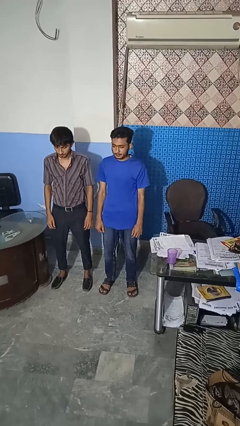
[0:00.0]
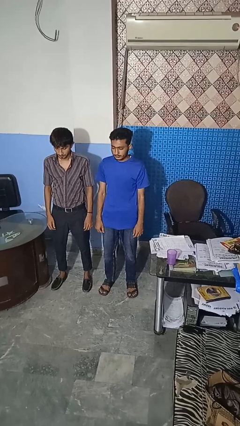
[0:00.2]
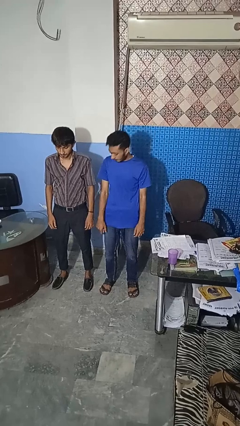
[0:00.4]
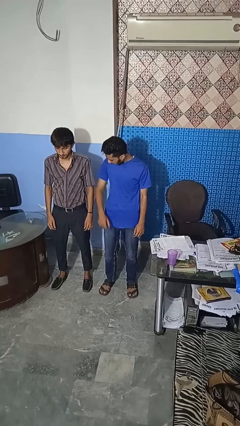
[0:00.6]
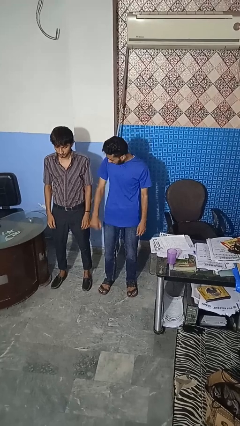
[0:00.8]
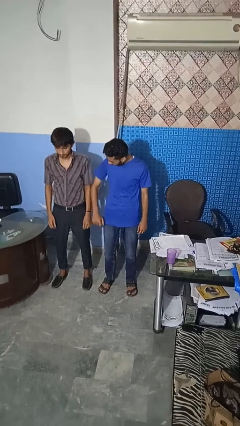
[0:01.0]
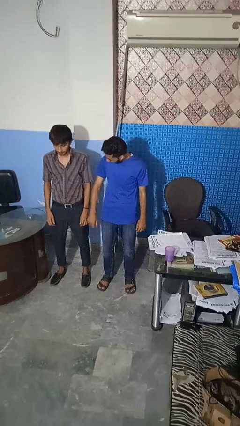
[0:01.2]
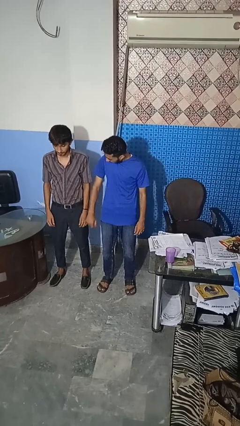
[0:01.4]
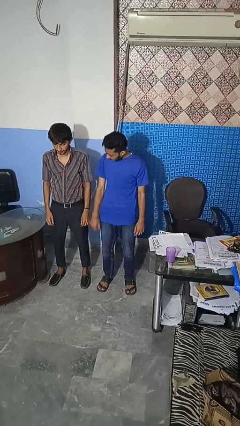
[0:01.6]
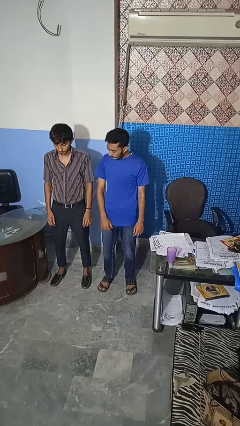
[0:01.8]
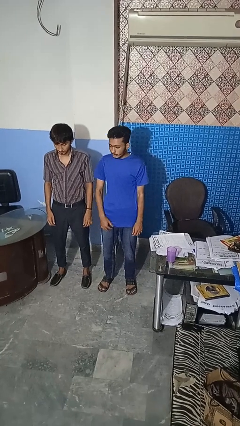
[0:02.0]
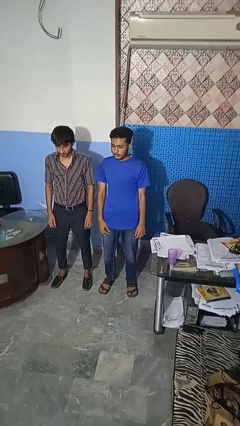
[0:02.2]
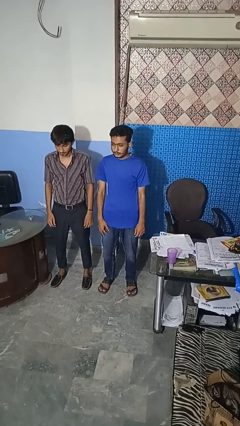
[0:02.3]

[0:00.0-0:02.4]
person nudges person with elbow

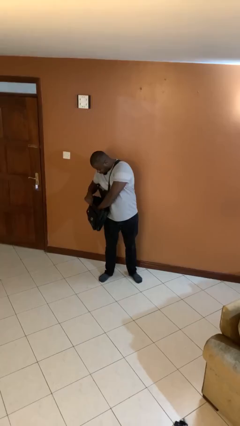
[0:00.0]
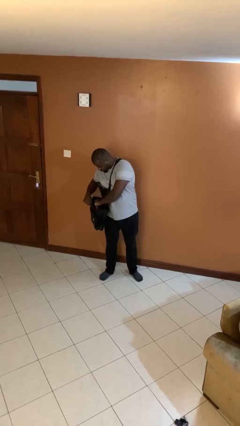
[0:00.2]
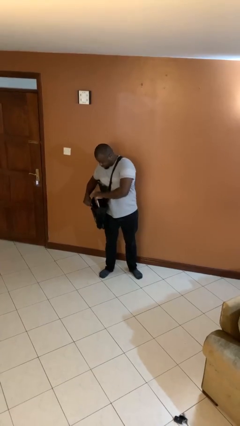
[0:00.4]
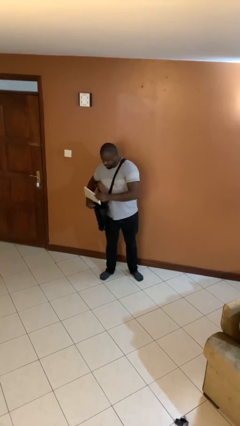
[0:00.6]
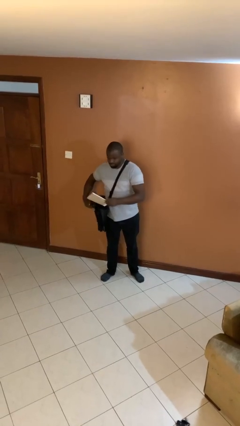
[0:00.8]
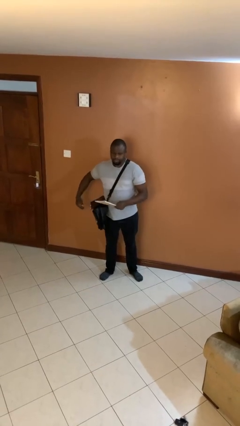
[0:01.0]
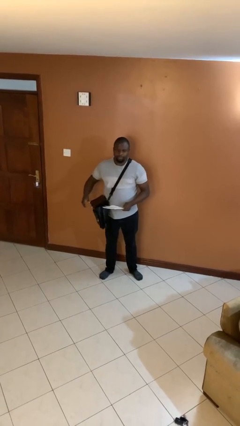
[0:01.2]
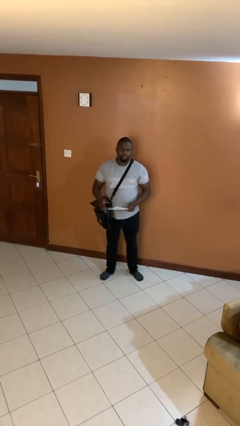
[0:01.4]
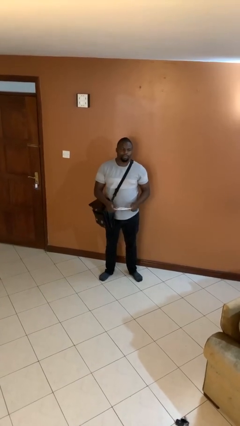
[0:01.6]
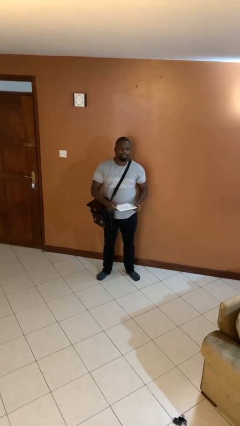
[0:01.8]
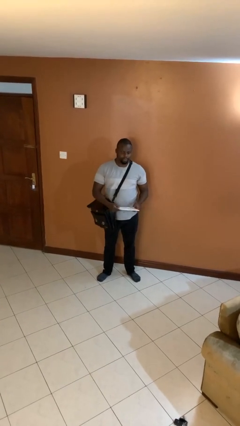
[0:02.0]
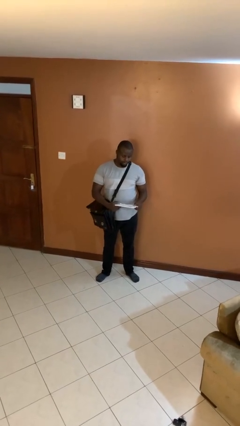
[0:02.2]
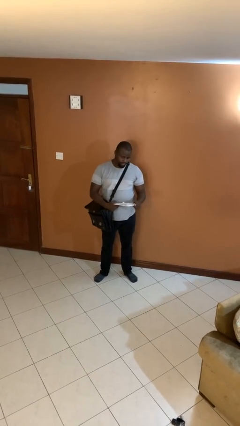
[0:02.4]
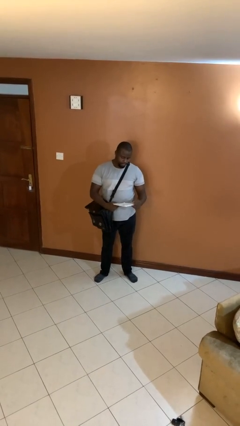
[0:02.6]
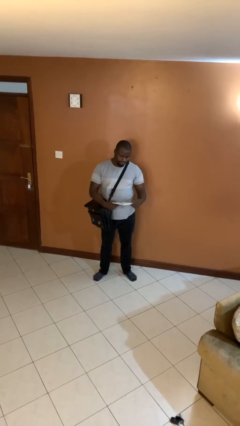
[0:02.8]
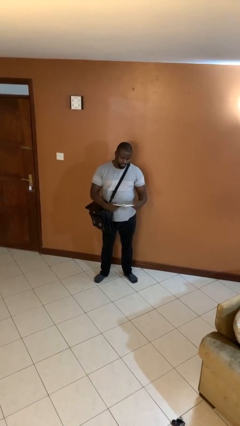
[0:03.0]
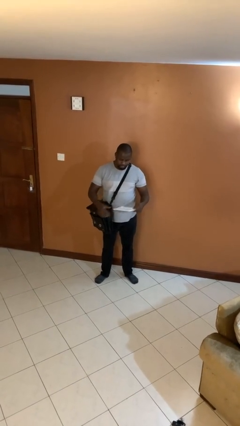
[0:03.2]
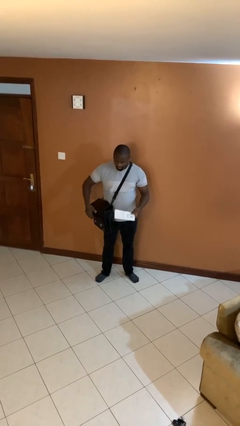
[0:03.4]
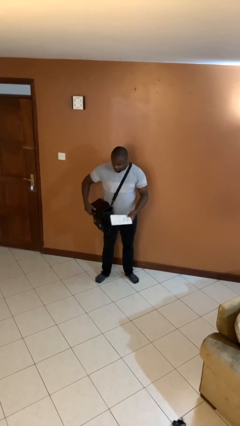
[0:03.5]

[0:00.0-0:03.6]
person takes object from purse

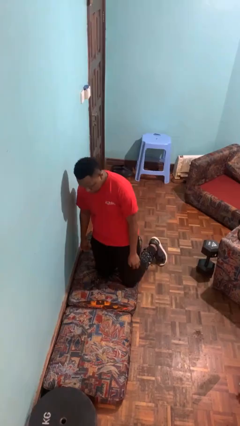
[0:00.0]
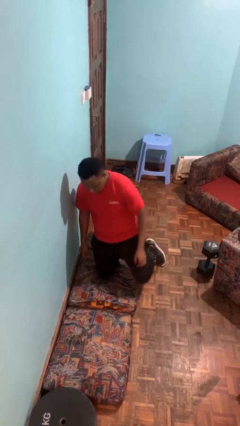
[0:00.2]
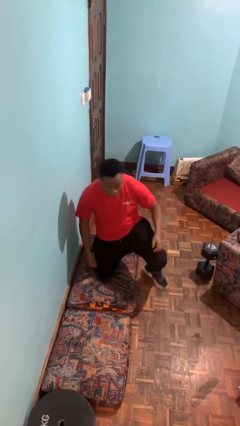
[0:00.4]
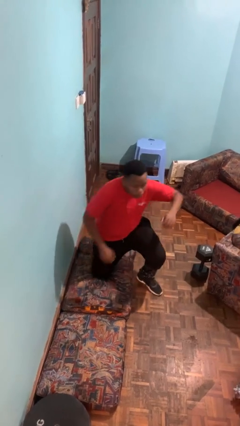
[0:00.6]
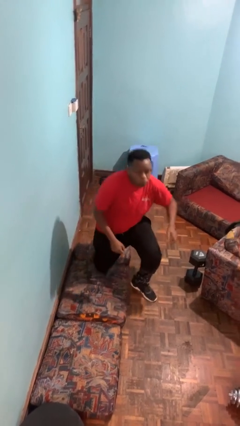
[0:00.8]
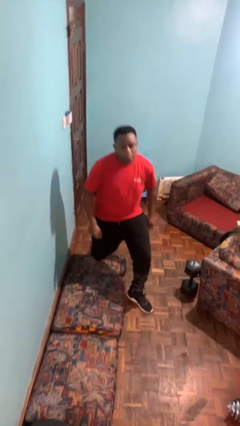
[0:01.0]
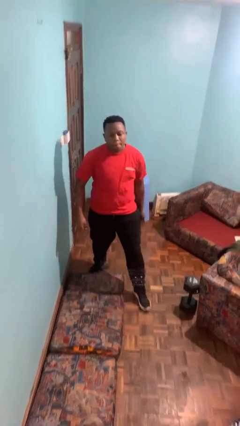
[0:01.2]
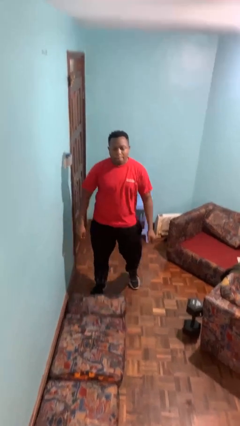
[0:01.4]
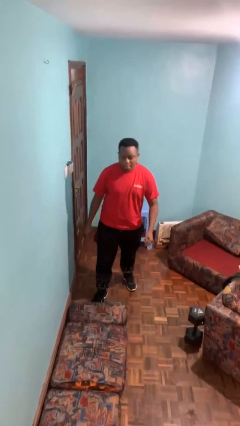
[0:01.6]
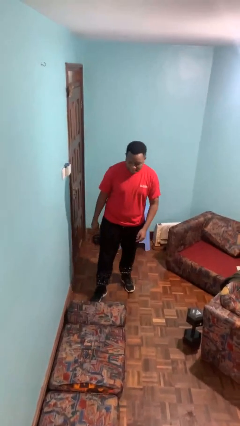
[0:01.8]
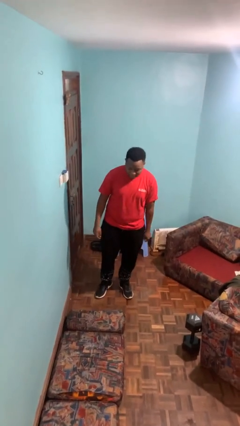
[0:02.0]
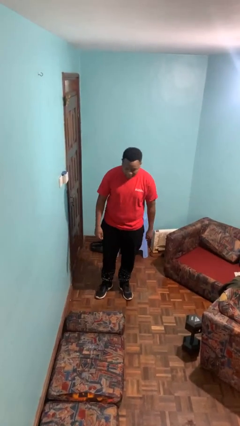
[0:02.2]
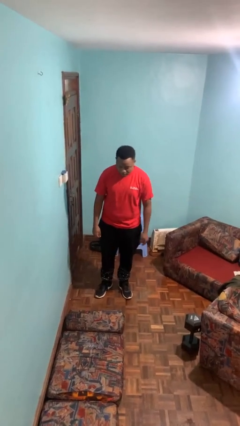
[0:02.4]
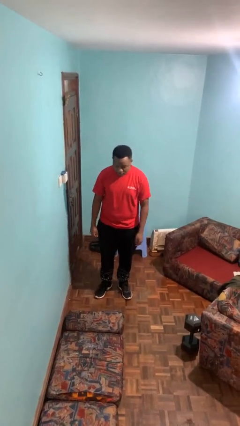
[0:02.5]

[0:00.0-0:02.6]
person stands up from floor

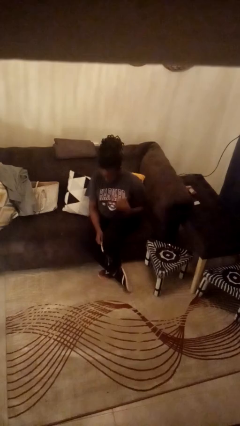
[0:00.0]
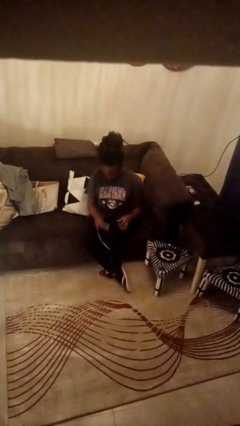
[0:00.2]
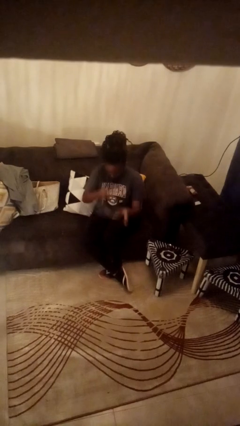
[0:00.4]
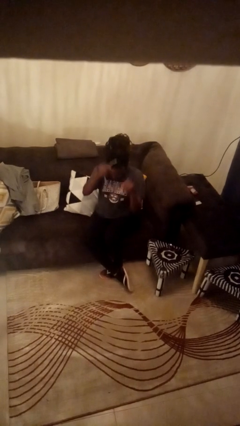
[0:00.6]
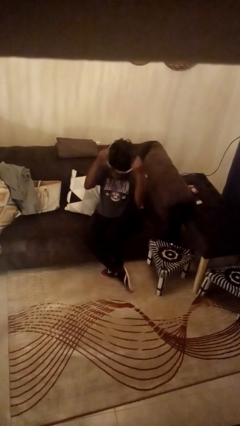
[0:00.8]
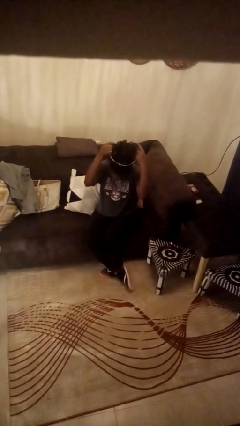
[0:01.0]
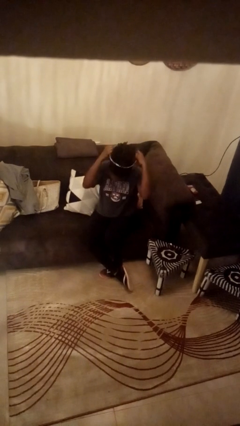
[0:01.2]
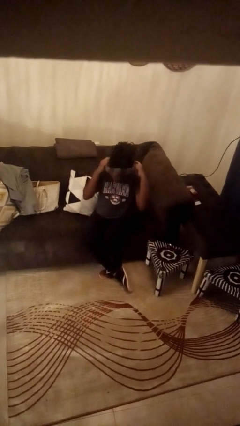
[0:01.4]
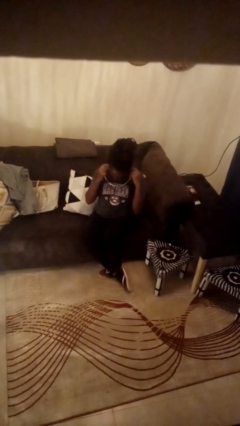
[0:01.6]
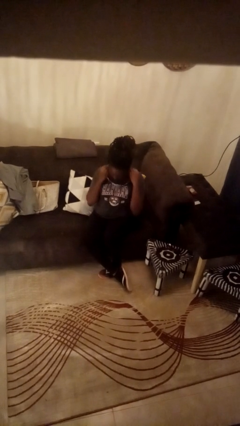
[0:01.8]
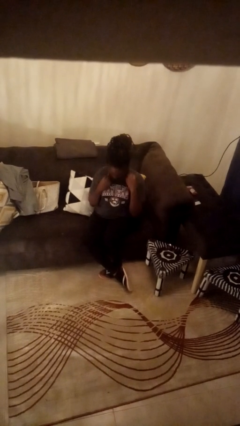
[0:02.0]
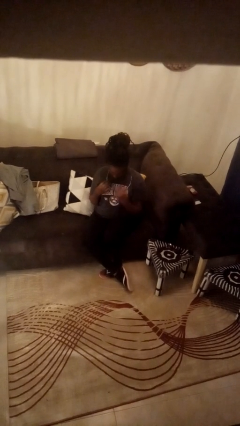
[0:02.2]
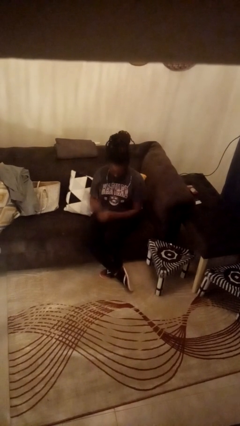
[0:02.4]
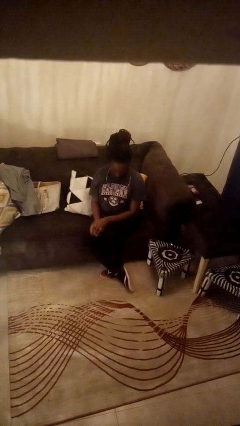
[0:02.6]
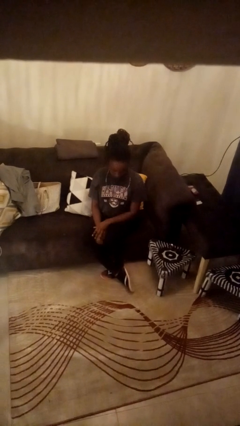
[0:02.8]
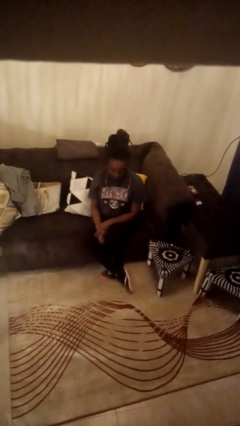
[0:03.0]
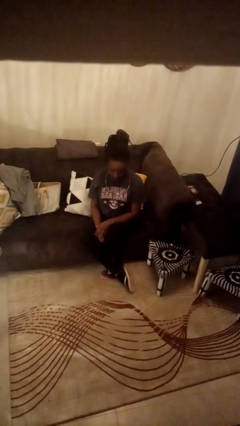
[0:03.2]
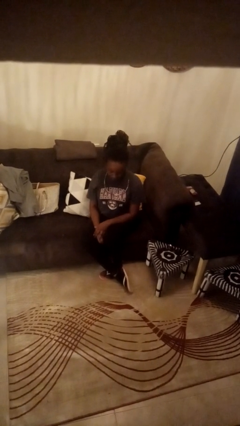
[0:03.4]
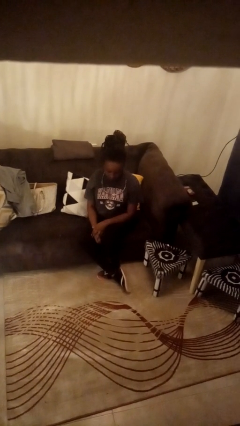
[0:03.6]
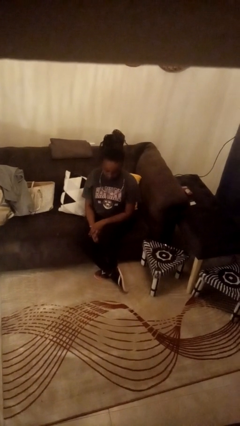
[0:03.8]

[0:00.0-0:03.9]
person puts on necklace

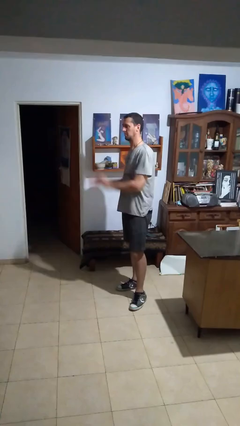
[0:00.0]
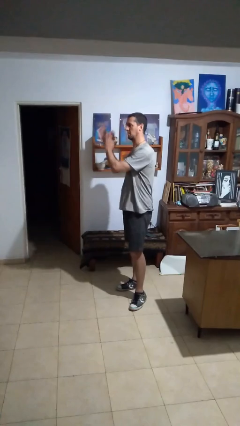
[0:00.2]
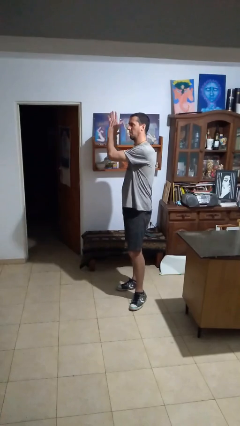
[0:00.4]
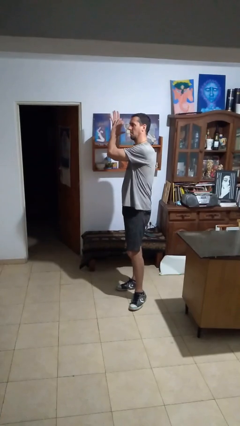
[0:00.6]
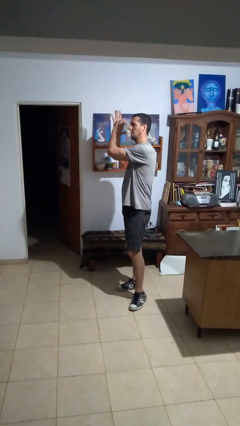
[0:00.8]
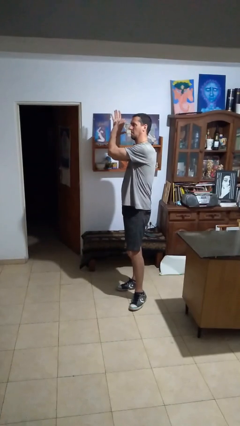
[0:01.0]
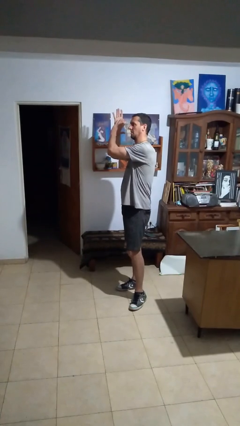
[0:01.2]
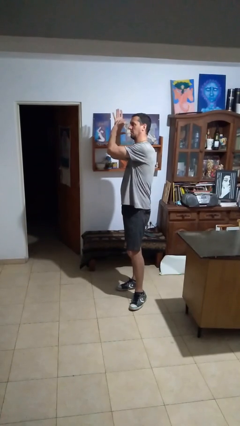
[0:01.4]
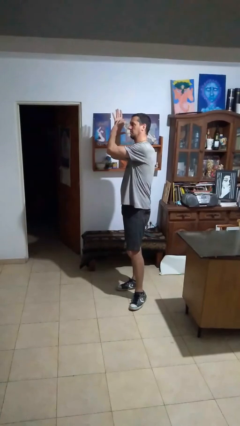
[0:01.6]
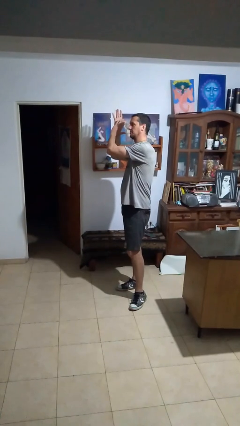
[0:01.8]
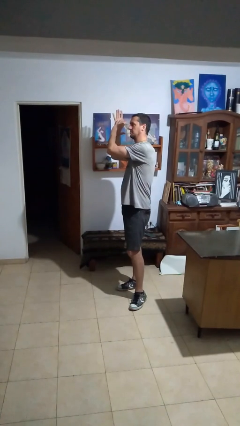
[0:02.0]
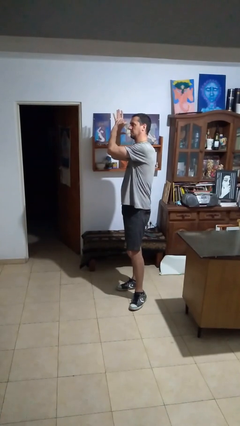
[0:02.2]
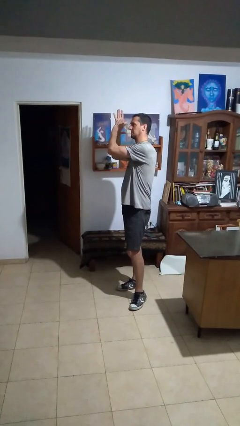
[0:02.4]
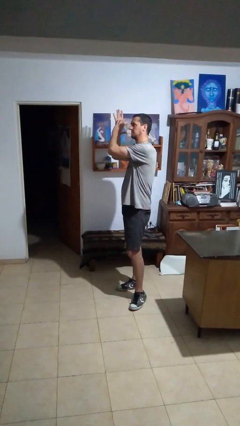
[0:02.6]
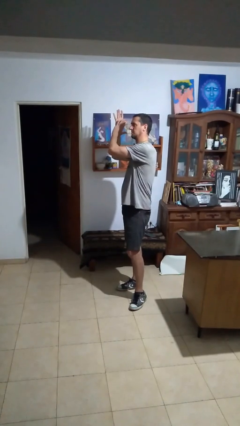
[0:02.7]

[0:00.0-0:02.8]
person claps hands

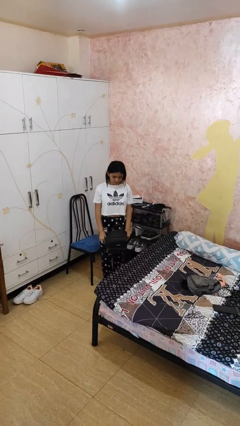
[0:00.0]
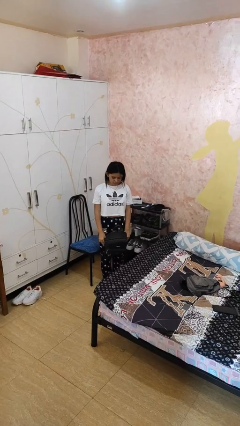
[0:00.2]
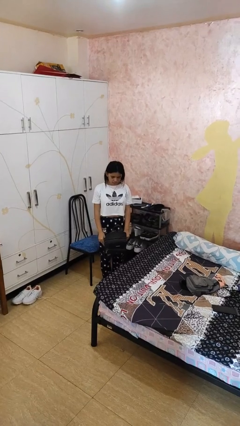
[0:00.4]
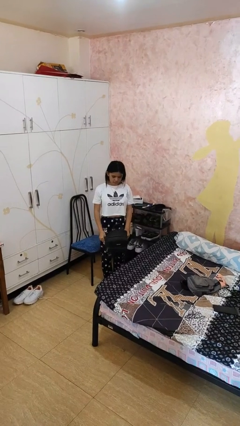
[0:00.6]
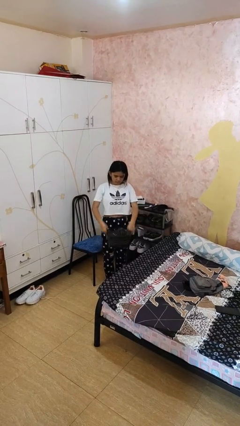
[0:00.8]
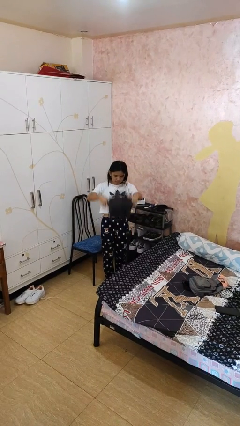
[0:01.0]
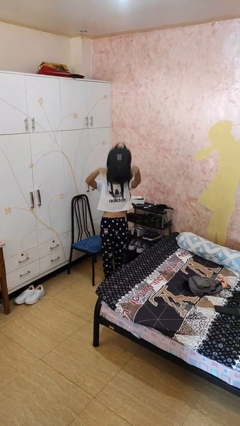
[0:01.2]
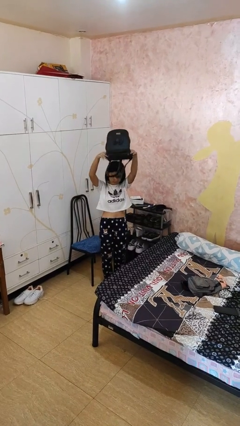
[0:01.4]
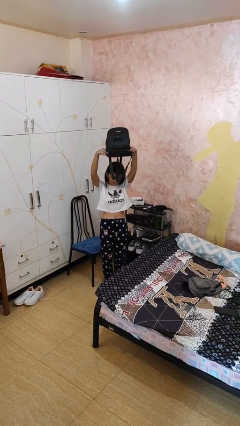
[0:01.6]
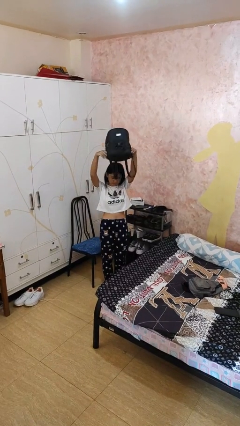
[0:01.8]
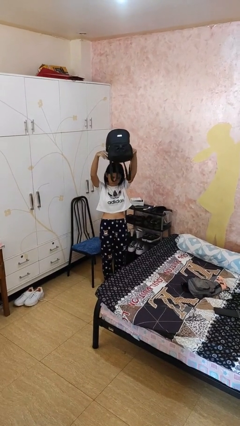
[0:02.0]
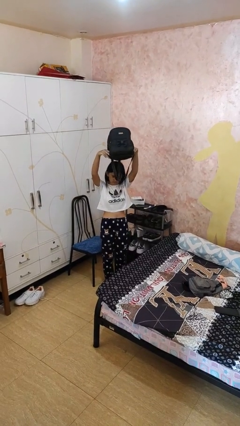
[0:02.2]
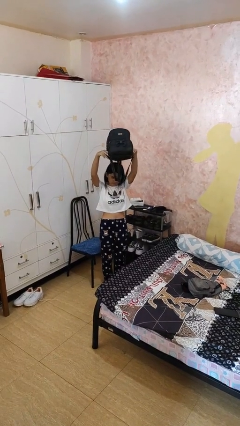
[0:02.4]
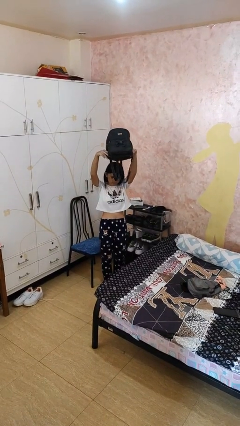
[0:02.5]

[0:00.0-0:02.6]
person holds object above head
